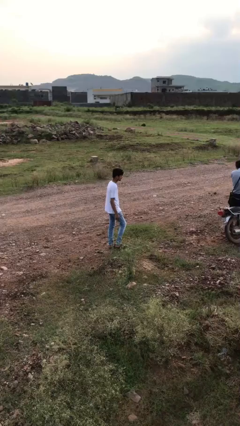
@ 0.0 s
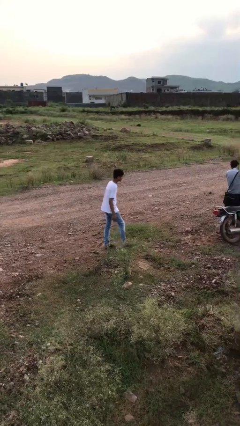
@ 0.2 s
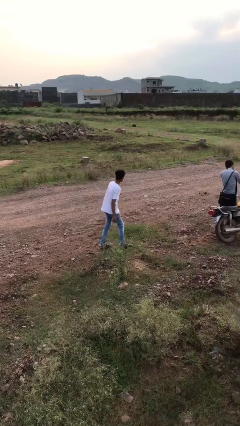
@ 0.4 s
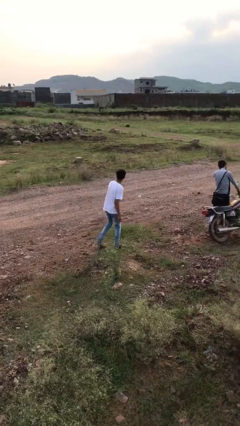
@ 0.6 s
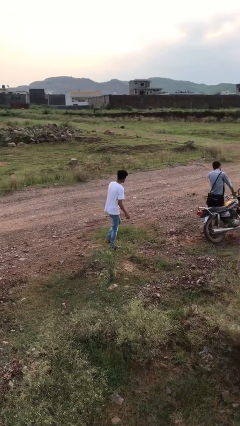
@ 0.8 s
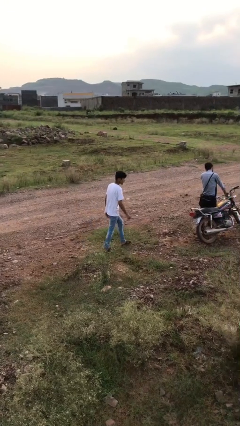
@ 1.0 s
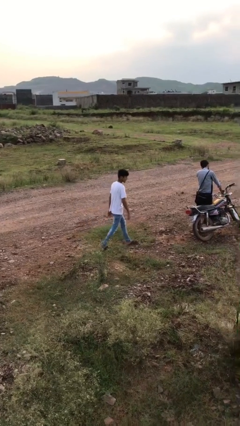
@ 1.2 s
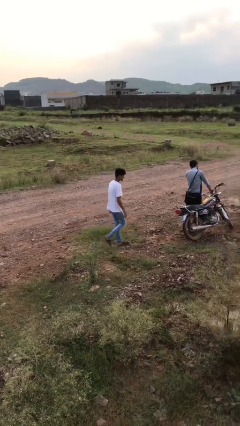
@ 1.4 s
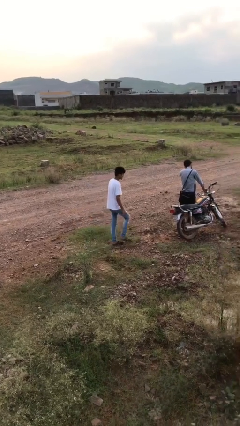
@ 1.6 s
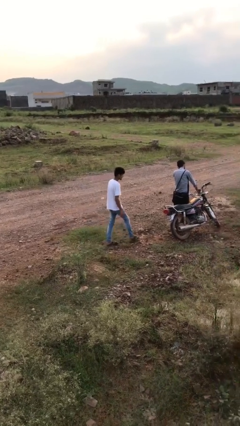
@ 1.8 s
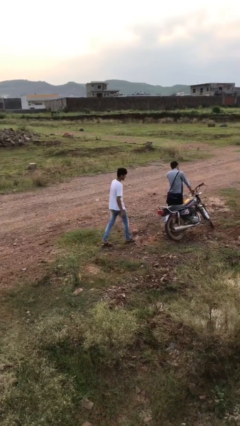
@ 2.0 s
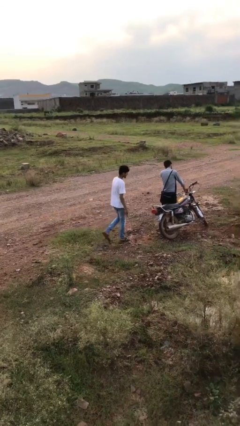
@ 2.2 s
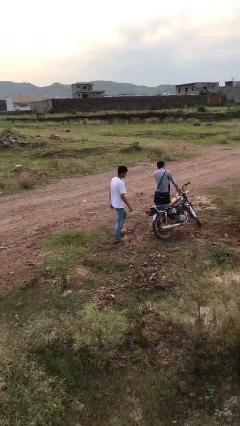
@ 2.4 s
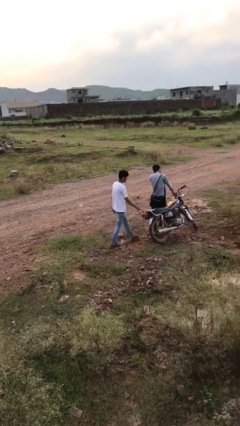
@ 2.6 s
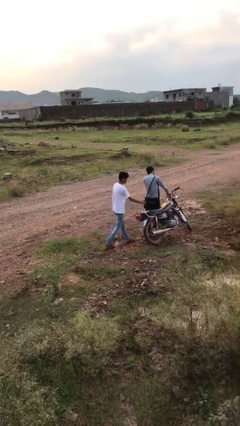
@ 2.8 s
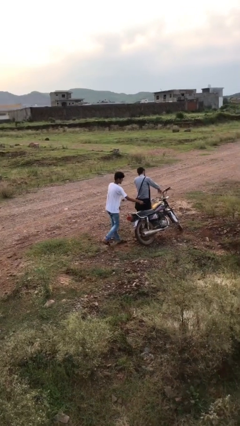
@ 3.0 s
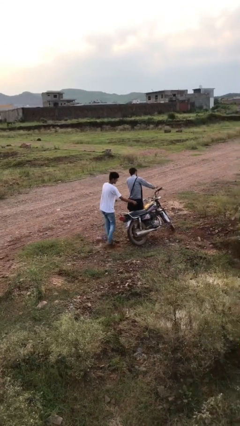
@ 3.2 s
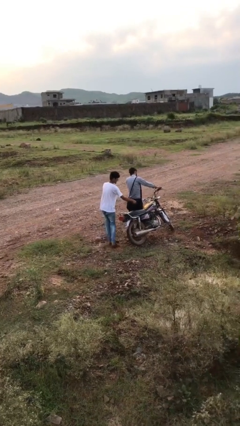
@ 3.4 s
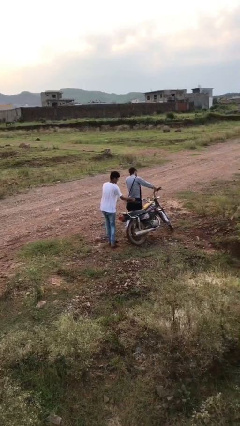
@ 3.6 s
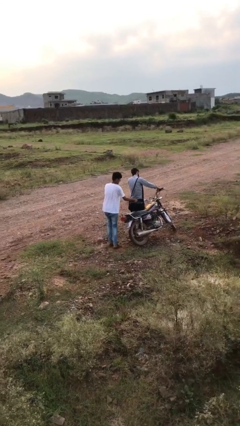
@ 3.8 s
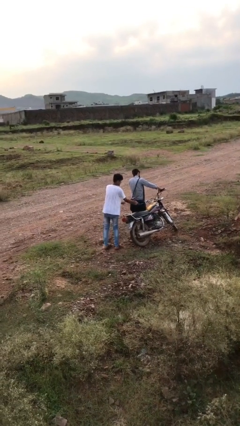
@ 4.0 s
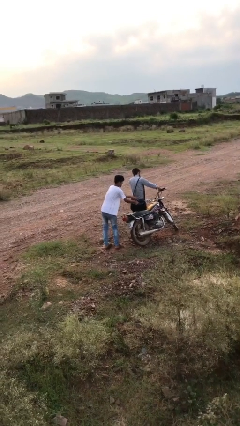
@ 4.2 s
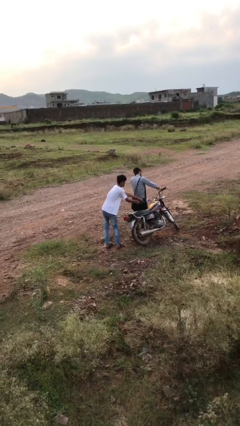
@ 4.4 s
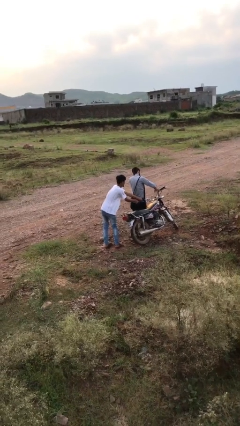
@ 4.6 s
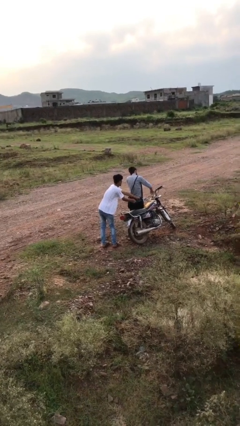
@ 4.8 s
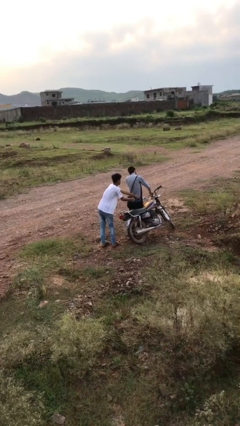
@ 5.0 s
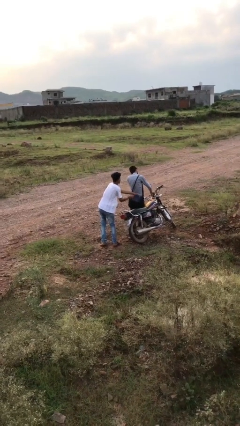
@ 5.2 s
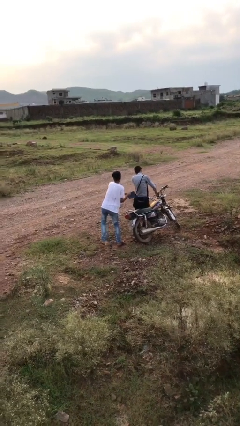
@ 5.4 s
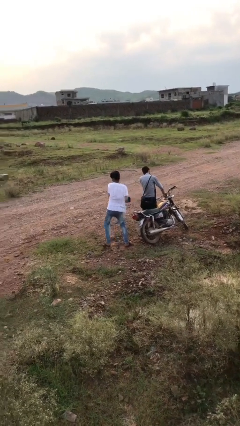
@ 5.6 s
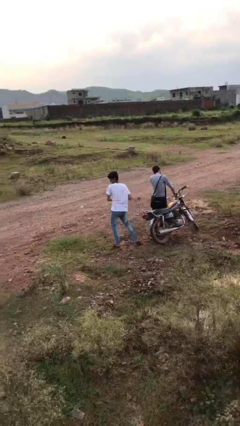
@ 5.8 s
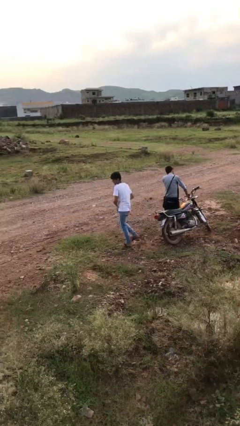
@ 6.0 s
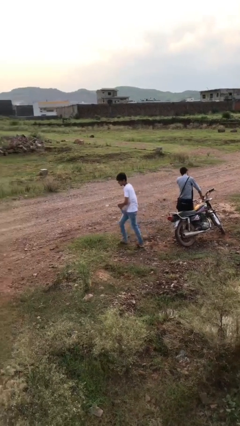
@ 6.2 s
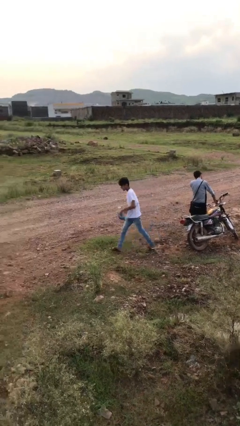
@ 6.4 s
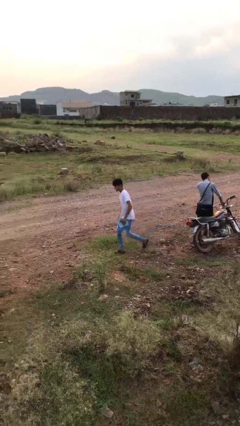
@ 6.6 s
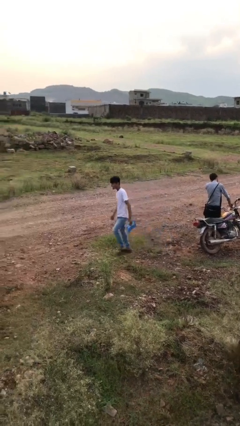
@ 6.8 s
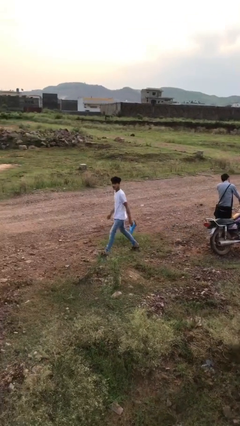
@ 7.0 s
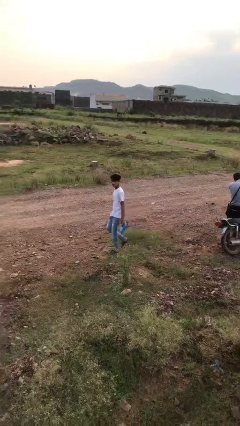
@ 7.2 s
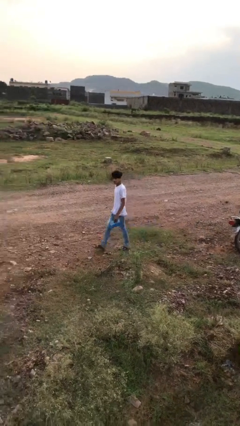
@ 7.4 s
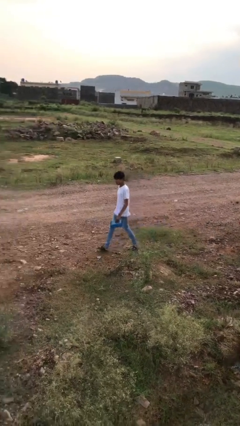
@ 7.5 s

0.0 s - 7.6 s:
person steals object from person

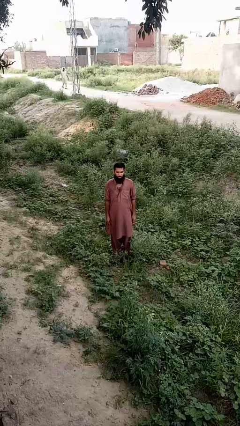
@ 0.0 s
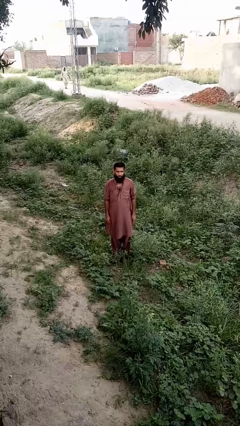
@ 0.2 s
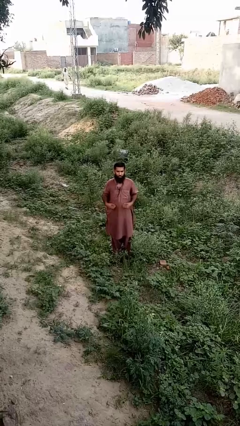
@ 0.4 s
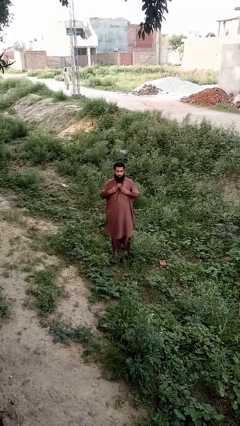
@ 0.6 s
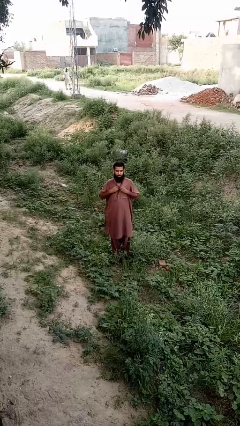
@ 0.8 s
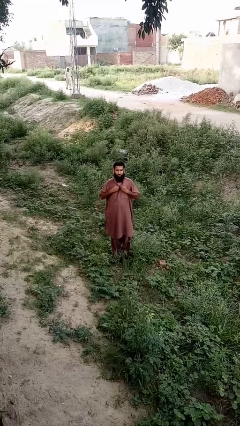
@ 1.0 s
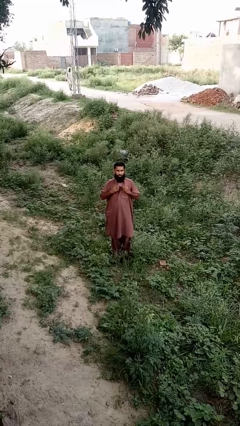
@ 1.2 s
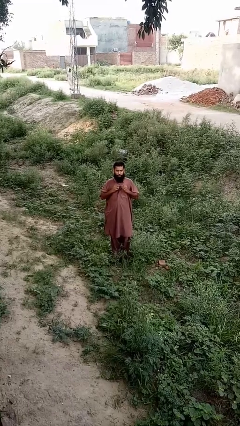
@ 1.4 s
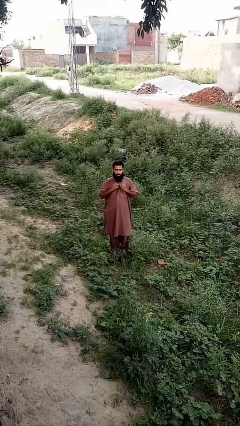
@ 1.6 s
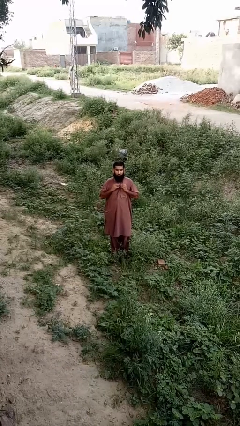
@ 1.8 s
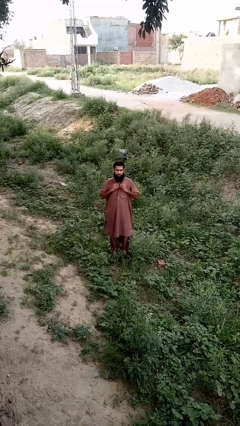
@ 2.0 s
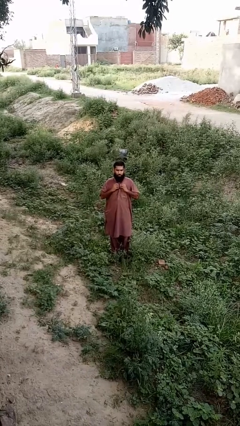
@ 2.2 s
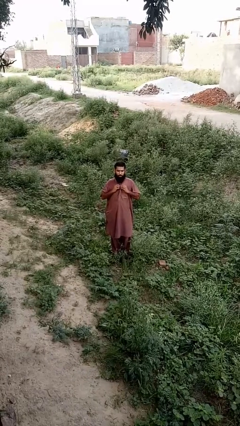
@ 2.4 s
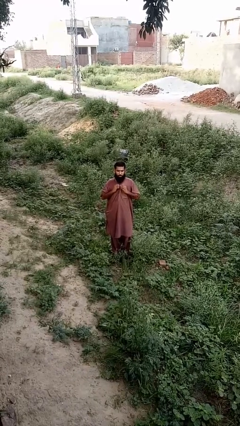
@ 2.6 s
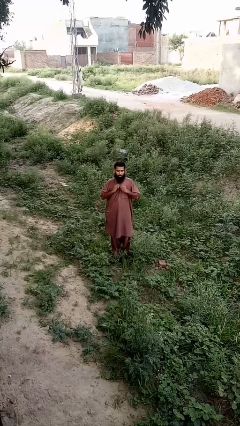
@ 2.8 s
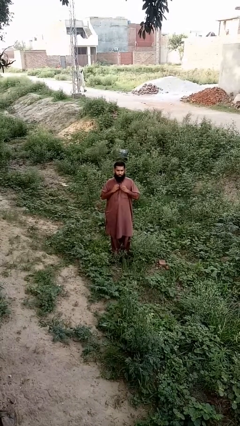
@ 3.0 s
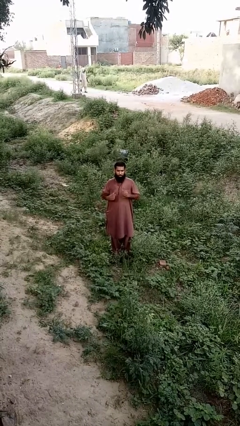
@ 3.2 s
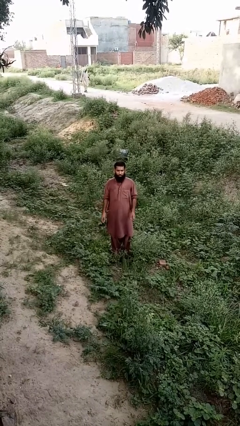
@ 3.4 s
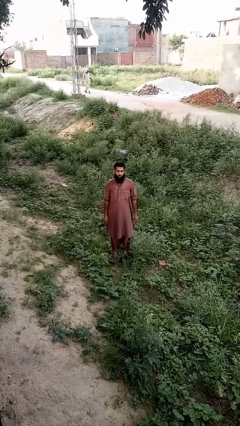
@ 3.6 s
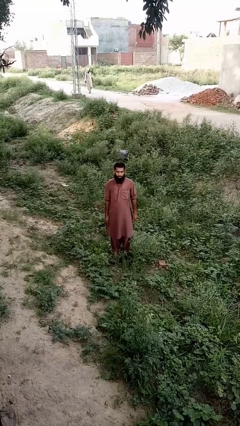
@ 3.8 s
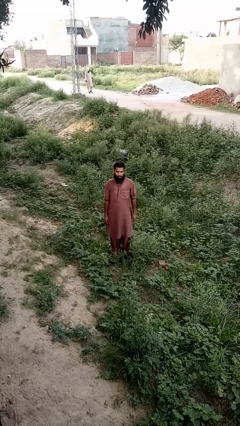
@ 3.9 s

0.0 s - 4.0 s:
person buttons shirt

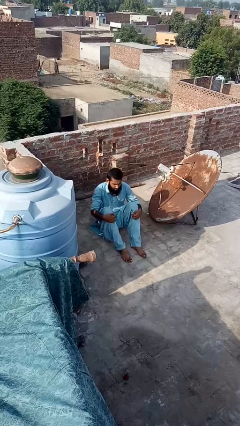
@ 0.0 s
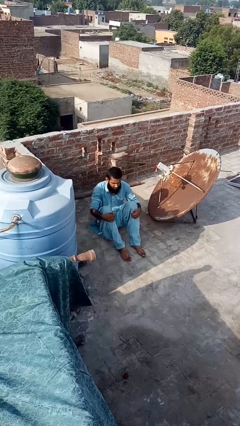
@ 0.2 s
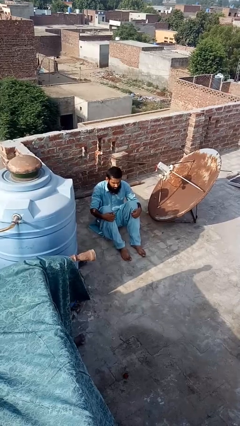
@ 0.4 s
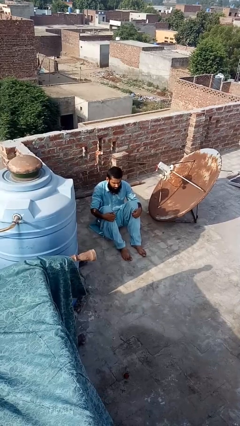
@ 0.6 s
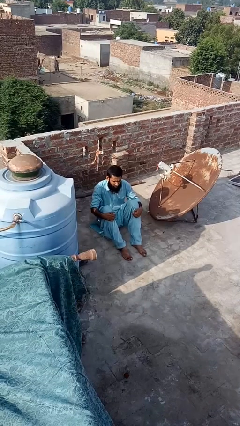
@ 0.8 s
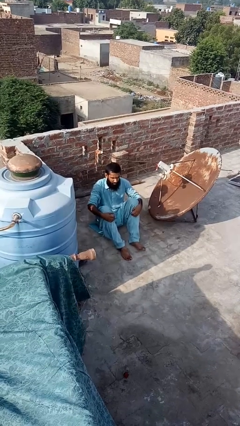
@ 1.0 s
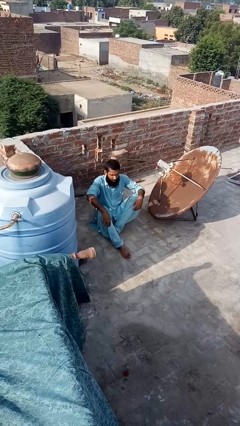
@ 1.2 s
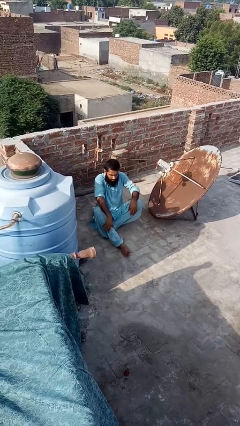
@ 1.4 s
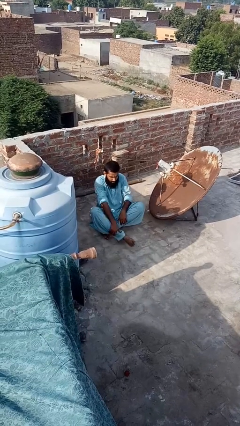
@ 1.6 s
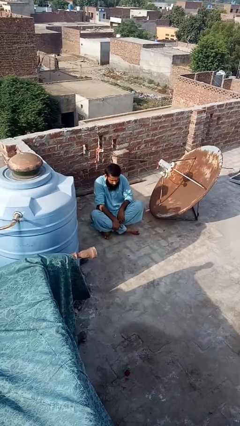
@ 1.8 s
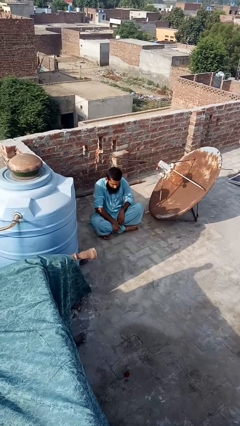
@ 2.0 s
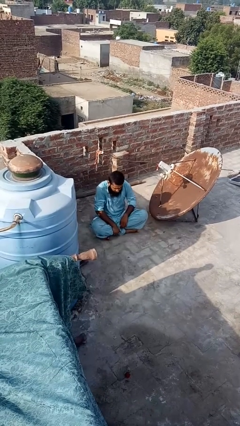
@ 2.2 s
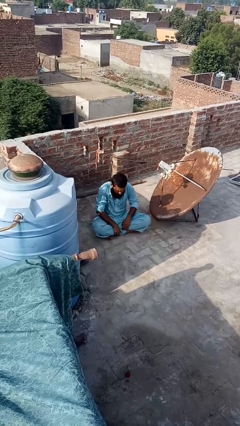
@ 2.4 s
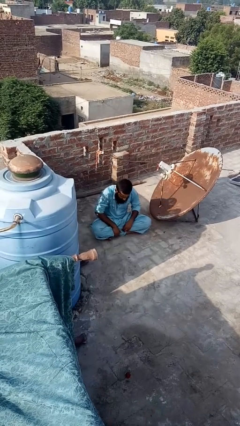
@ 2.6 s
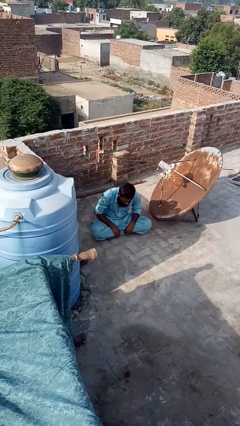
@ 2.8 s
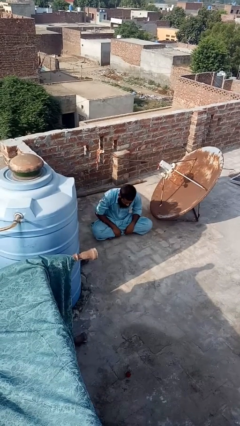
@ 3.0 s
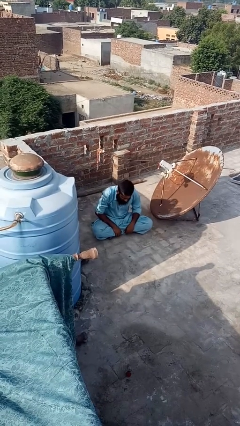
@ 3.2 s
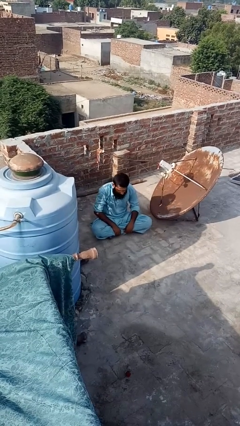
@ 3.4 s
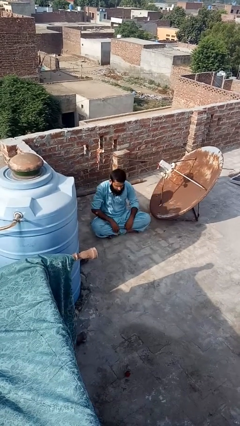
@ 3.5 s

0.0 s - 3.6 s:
person crosses legs

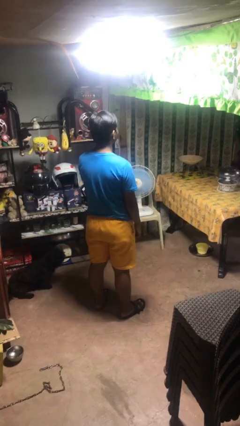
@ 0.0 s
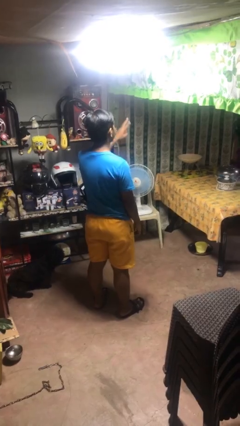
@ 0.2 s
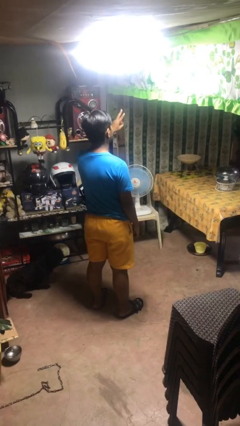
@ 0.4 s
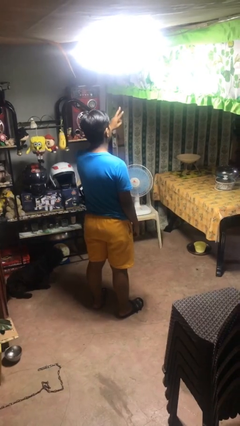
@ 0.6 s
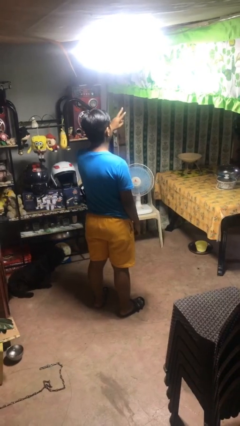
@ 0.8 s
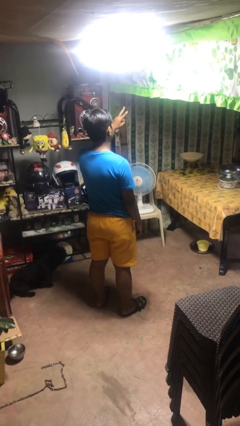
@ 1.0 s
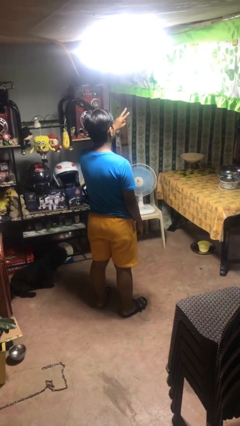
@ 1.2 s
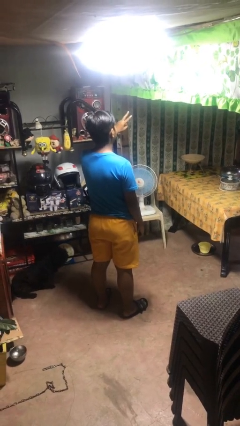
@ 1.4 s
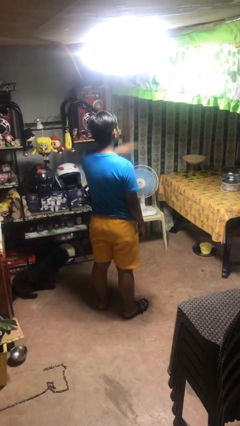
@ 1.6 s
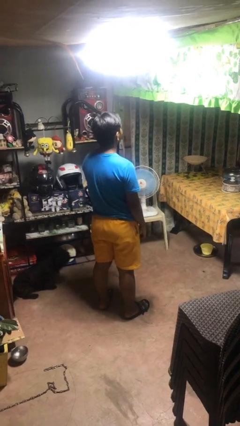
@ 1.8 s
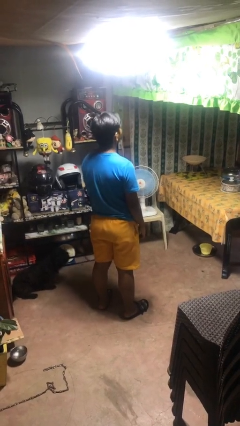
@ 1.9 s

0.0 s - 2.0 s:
person gestures peace

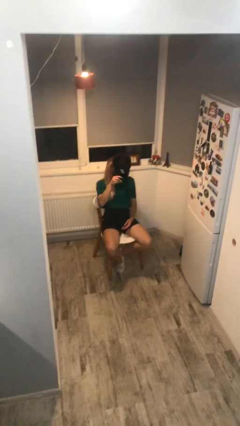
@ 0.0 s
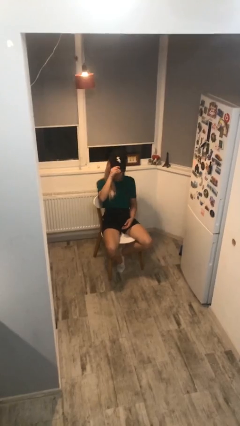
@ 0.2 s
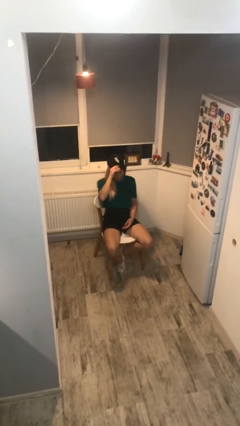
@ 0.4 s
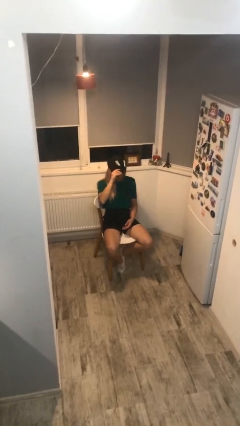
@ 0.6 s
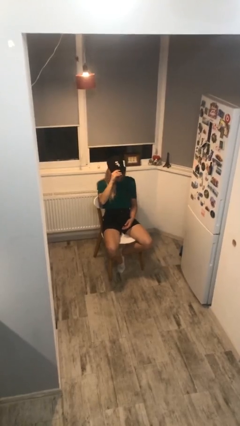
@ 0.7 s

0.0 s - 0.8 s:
person puts on hat
